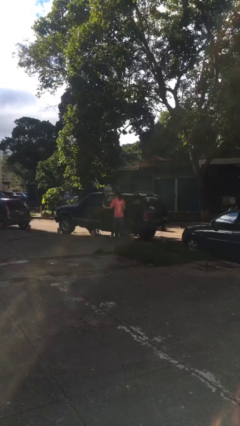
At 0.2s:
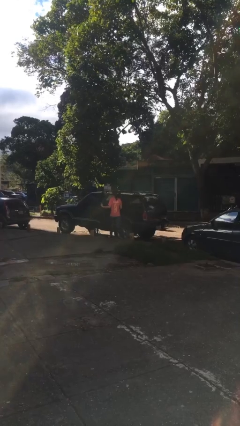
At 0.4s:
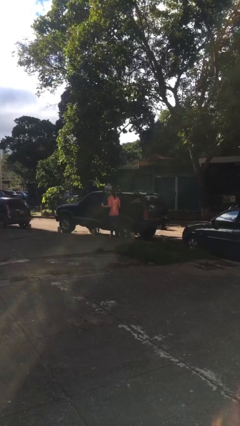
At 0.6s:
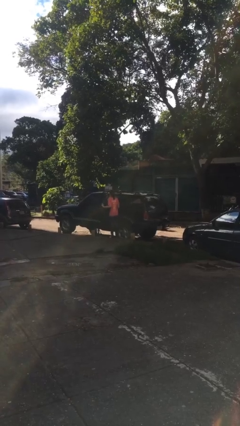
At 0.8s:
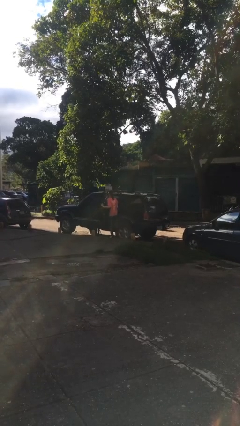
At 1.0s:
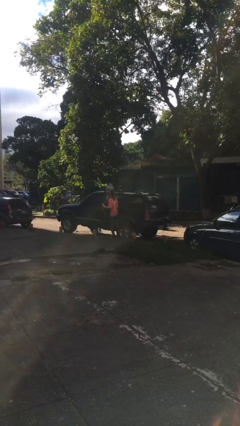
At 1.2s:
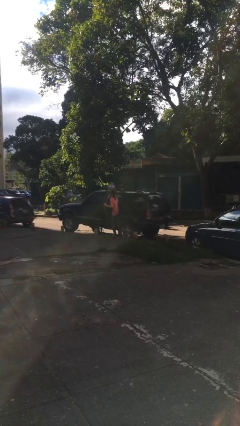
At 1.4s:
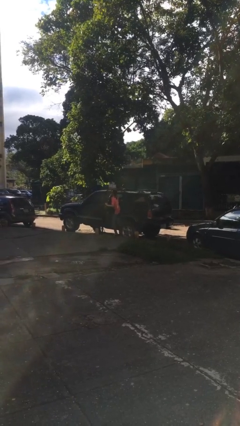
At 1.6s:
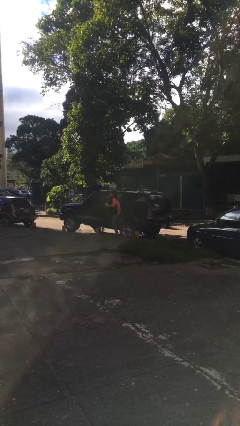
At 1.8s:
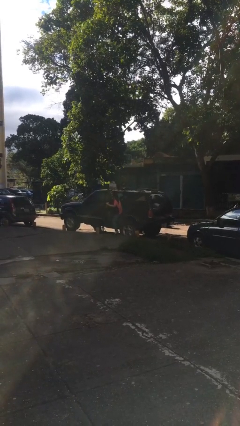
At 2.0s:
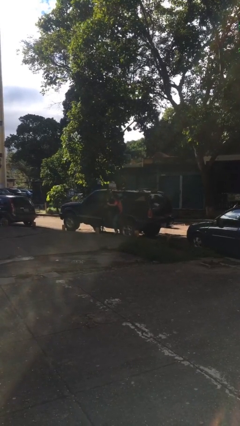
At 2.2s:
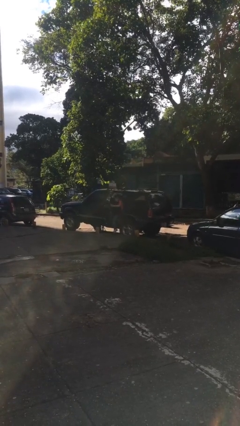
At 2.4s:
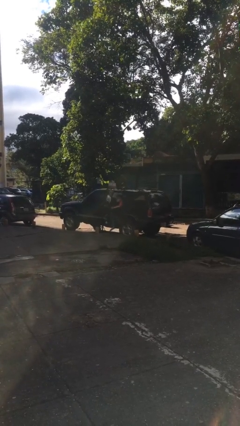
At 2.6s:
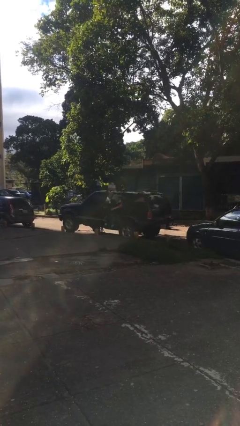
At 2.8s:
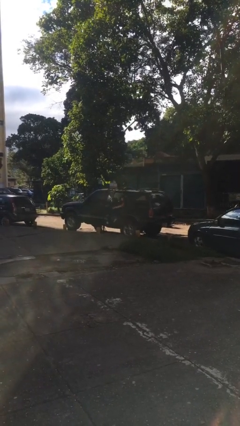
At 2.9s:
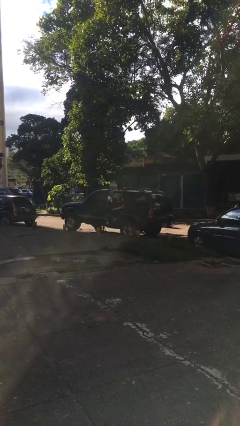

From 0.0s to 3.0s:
person enters car

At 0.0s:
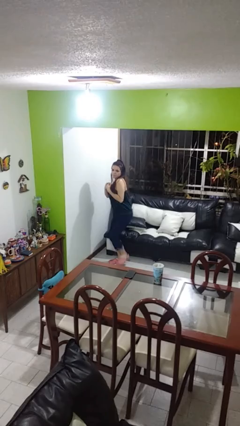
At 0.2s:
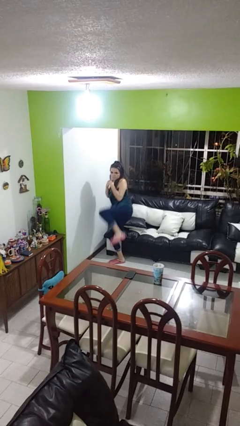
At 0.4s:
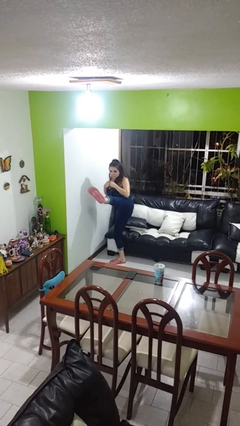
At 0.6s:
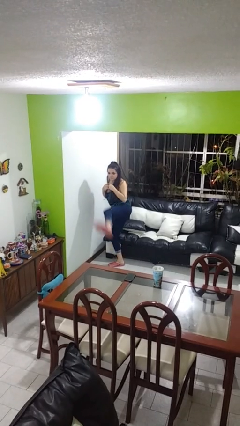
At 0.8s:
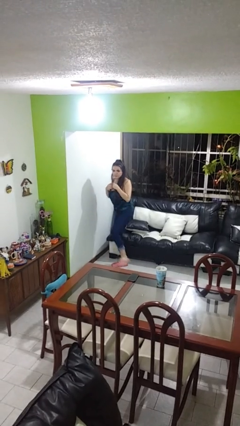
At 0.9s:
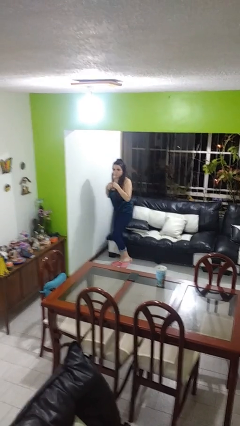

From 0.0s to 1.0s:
person karate kicks

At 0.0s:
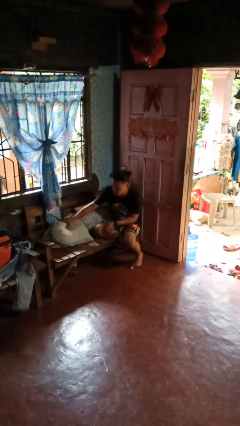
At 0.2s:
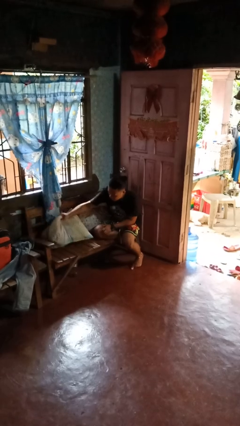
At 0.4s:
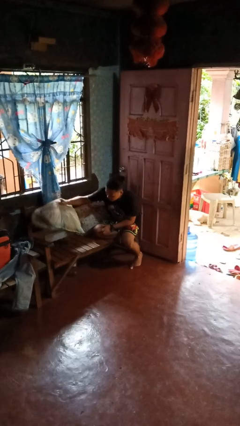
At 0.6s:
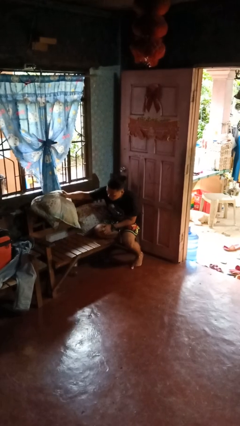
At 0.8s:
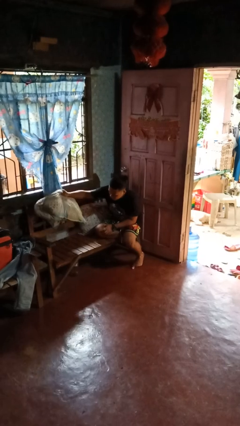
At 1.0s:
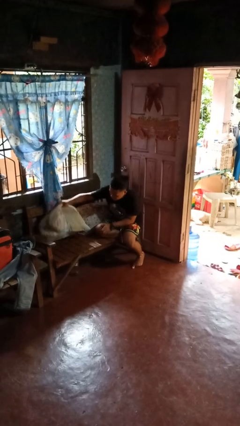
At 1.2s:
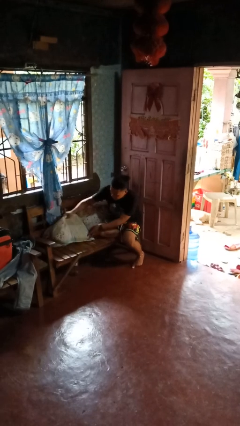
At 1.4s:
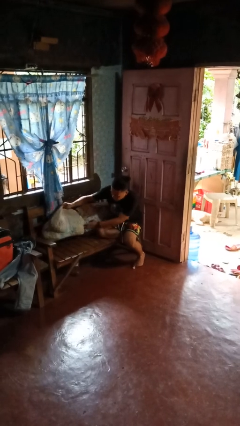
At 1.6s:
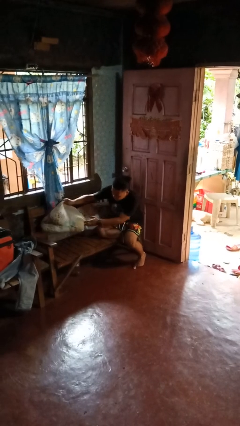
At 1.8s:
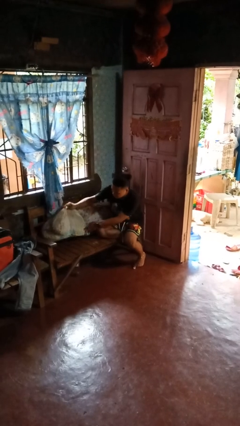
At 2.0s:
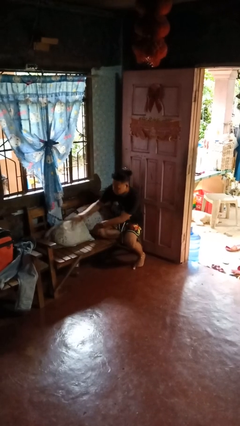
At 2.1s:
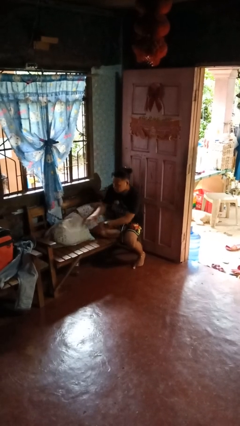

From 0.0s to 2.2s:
person searches in couch

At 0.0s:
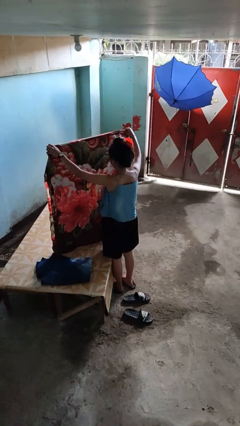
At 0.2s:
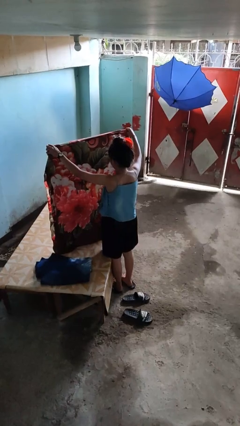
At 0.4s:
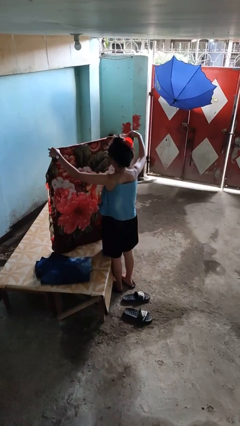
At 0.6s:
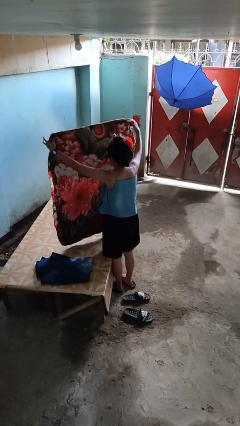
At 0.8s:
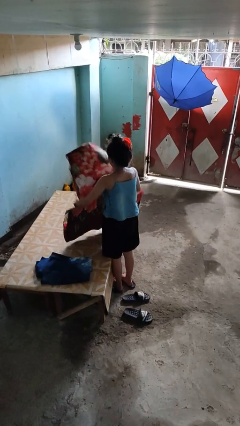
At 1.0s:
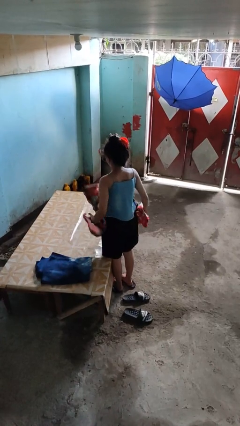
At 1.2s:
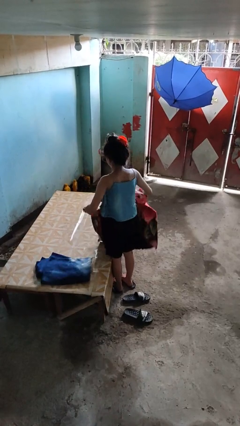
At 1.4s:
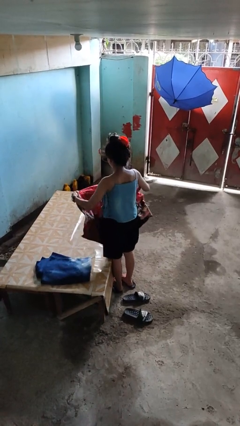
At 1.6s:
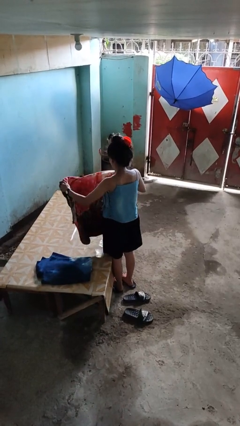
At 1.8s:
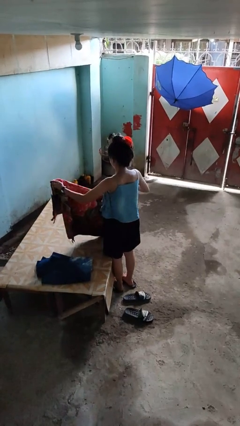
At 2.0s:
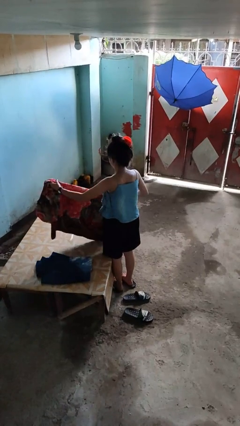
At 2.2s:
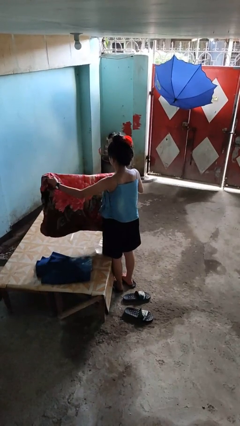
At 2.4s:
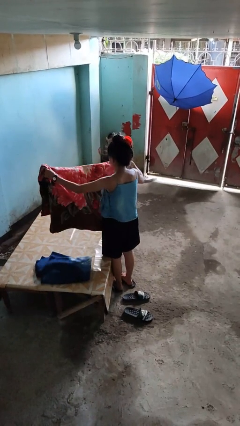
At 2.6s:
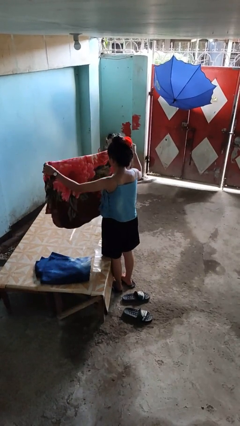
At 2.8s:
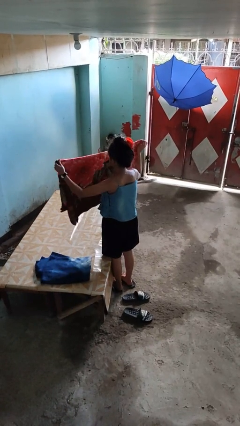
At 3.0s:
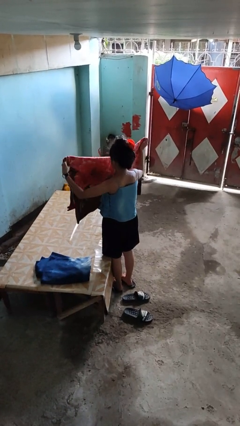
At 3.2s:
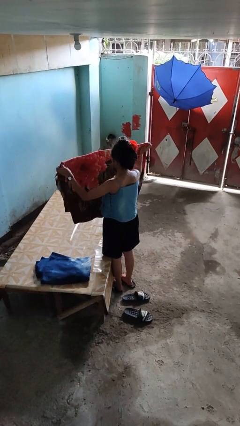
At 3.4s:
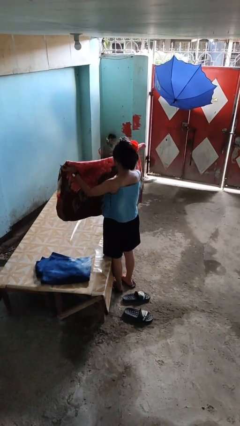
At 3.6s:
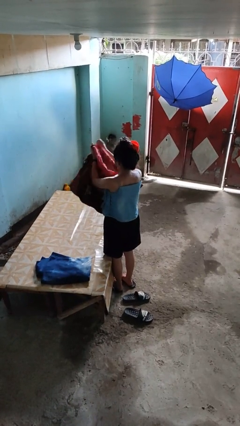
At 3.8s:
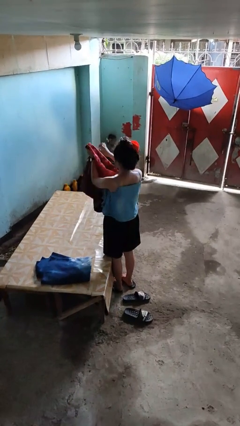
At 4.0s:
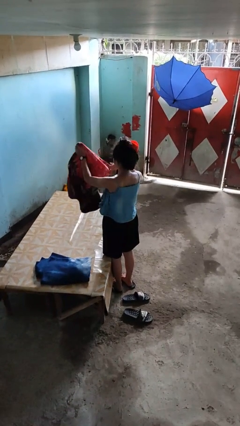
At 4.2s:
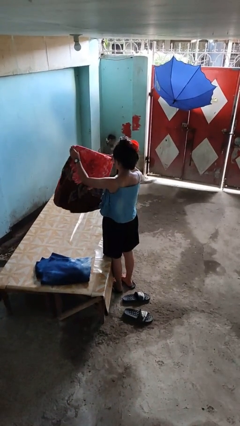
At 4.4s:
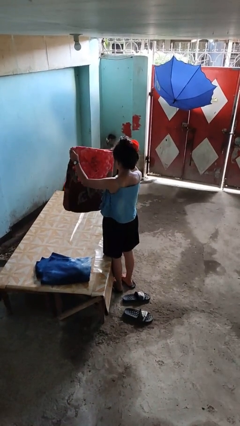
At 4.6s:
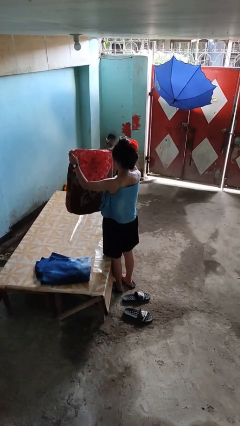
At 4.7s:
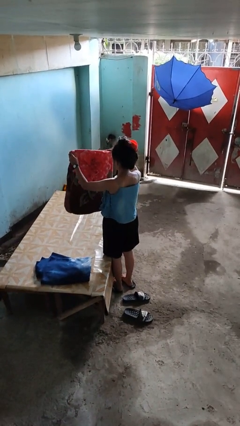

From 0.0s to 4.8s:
person folds blanket

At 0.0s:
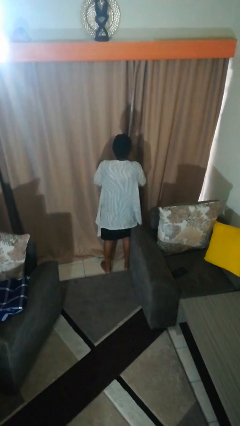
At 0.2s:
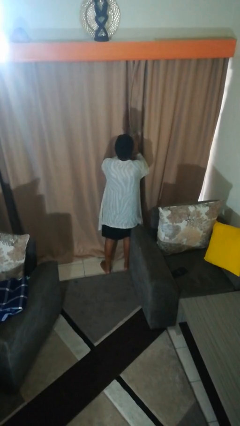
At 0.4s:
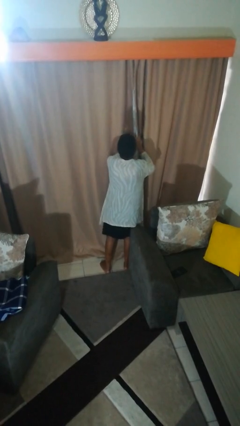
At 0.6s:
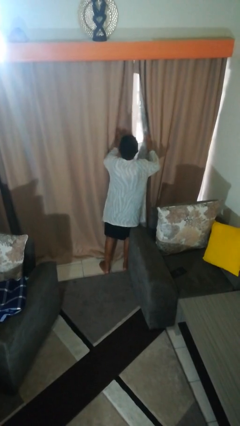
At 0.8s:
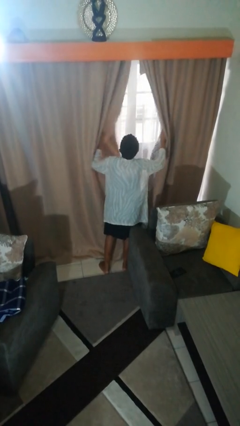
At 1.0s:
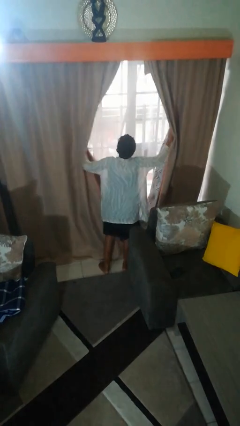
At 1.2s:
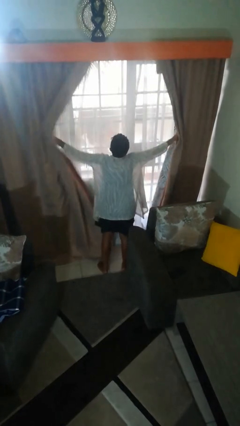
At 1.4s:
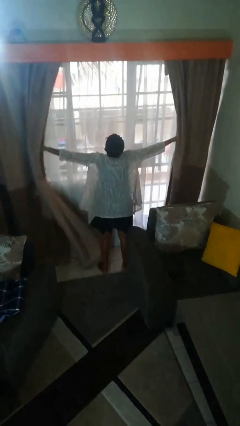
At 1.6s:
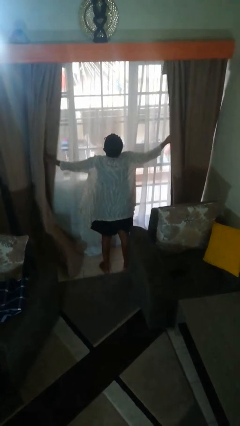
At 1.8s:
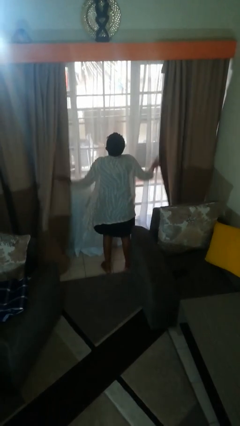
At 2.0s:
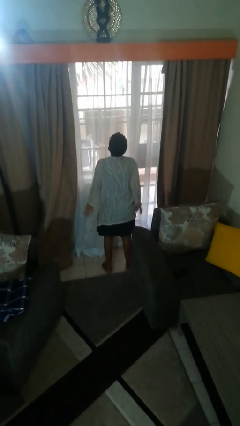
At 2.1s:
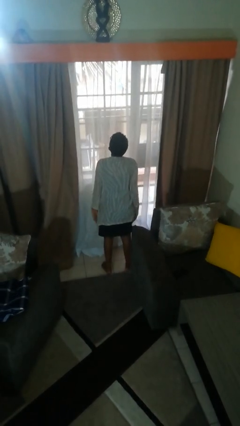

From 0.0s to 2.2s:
person opens curtains

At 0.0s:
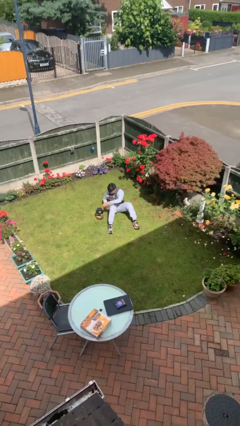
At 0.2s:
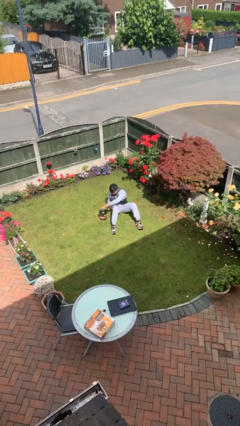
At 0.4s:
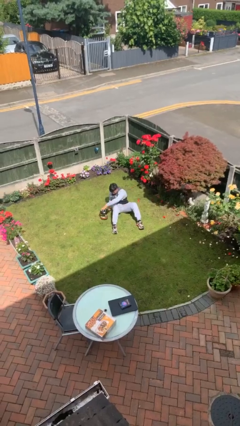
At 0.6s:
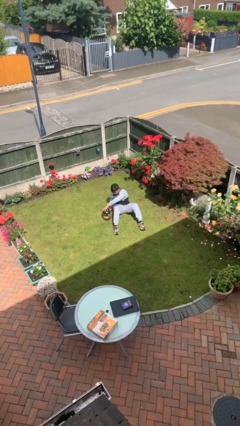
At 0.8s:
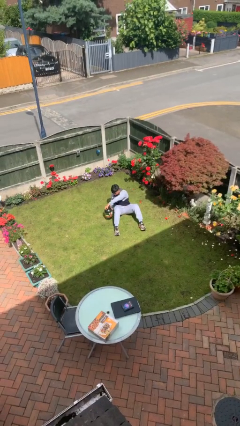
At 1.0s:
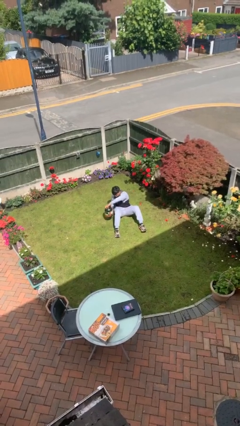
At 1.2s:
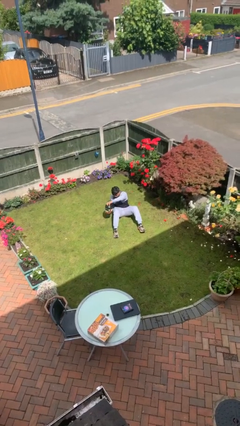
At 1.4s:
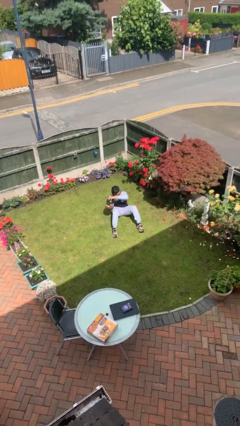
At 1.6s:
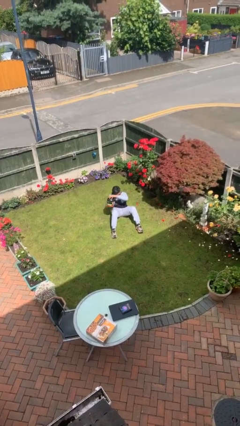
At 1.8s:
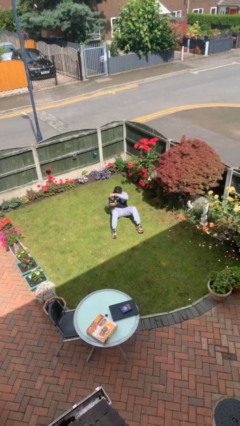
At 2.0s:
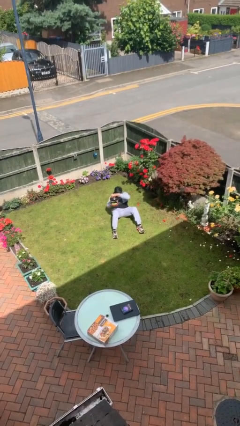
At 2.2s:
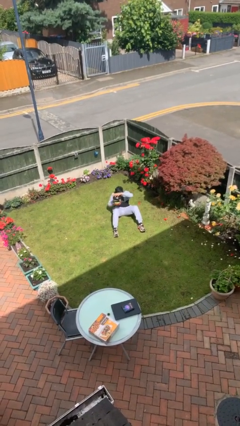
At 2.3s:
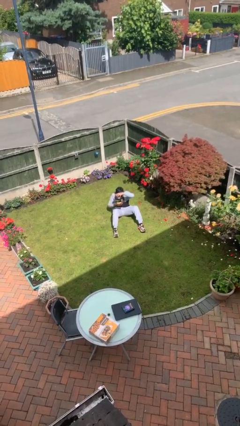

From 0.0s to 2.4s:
person picks up object from floor

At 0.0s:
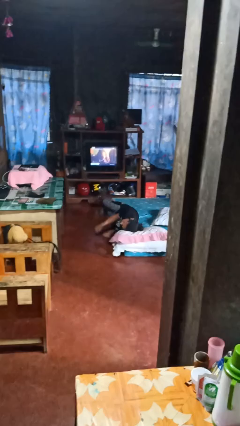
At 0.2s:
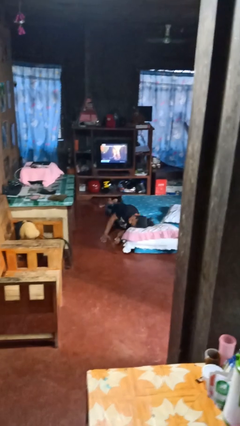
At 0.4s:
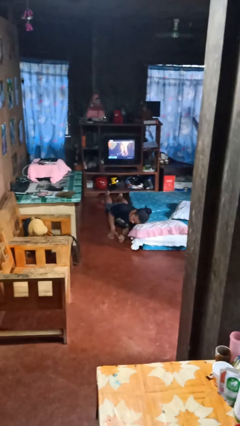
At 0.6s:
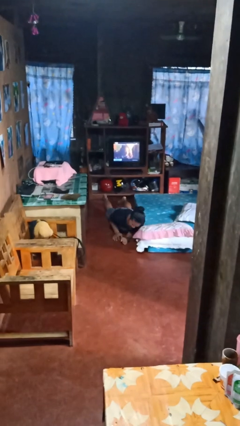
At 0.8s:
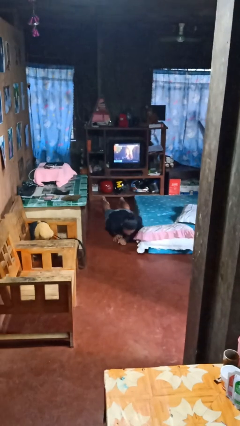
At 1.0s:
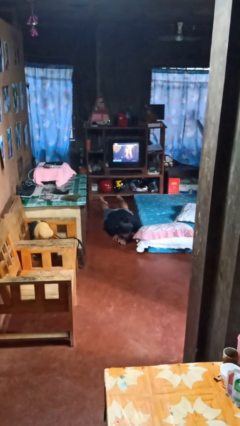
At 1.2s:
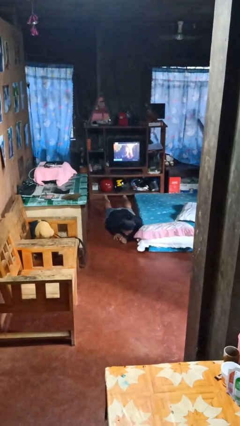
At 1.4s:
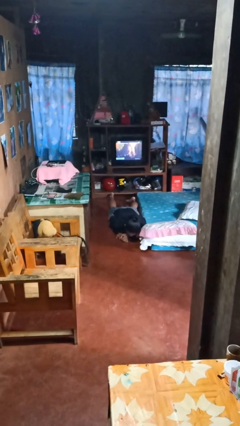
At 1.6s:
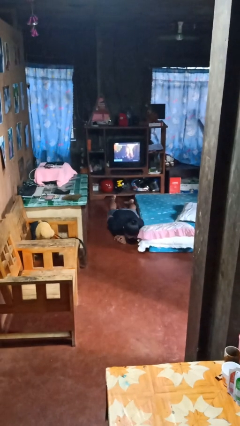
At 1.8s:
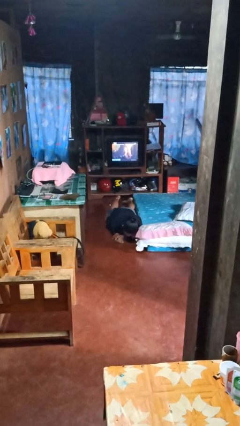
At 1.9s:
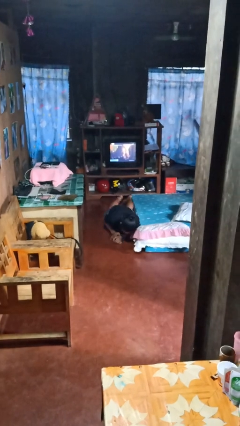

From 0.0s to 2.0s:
person falls from bed
